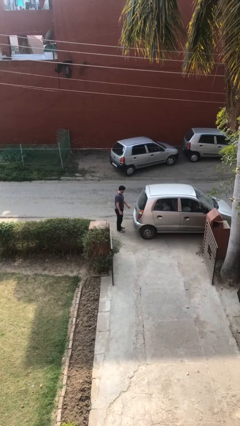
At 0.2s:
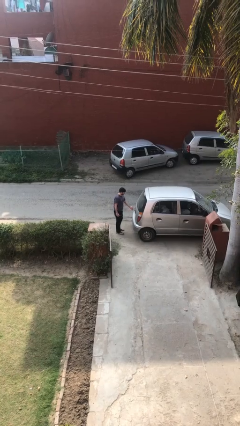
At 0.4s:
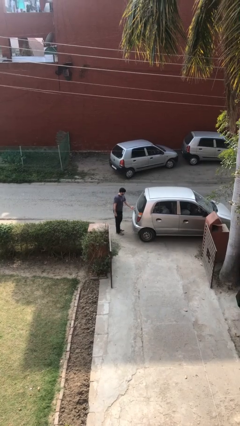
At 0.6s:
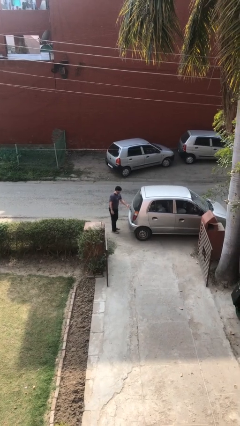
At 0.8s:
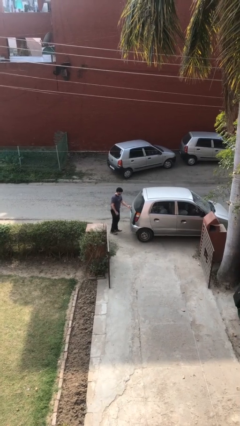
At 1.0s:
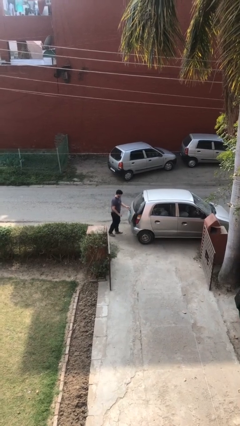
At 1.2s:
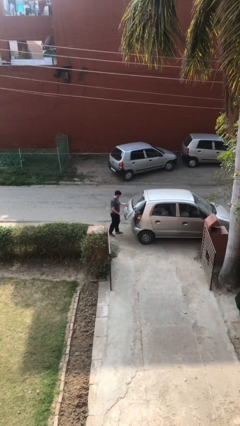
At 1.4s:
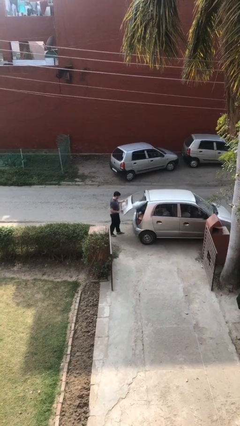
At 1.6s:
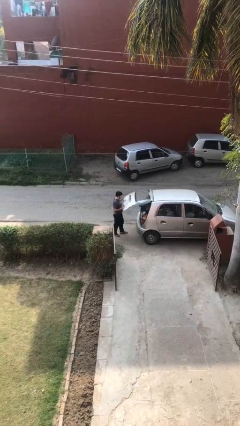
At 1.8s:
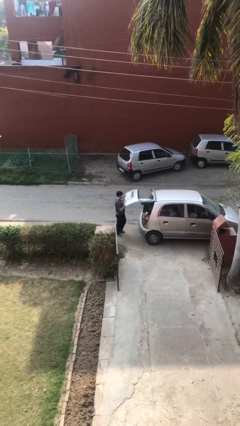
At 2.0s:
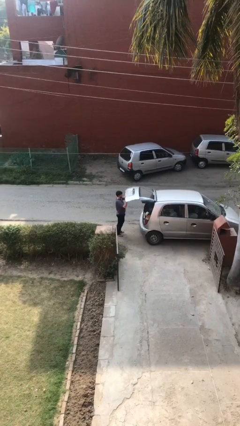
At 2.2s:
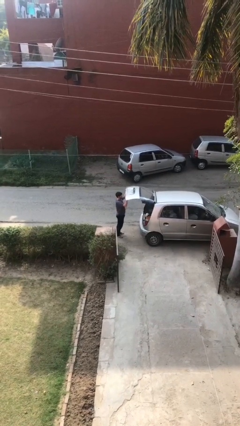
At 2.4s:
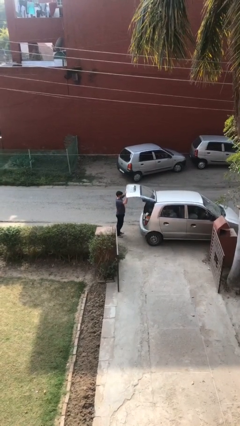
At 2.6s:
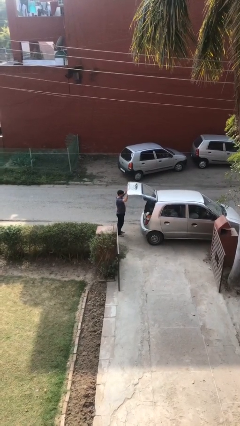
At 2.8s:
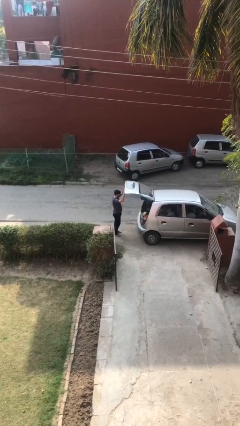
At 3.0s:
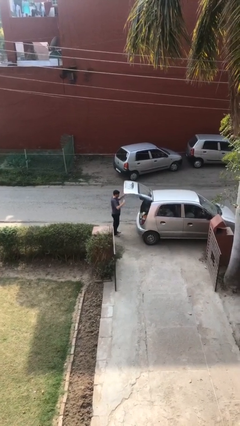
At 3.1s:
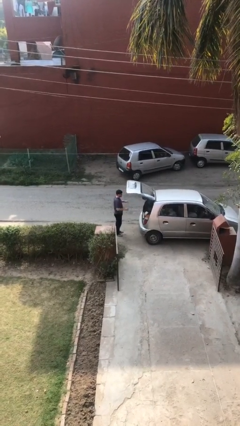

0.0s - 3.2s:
person opens car trunk

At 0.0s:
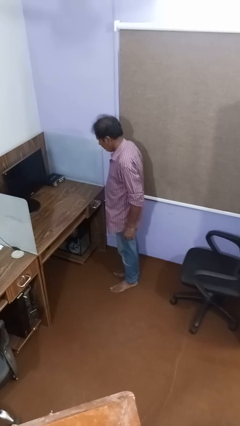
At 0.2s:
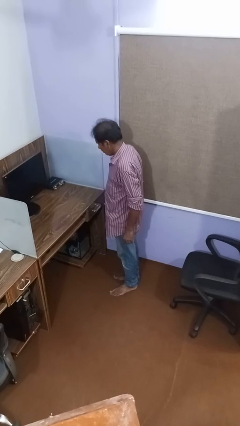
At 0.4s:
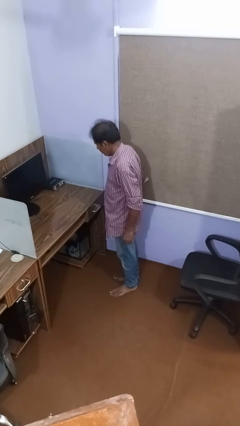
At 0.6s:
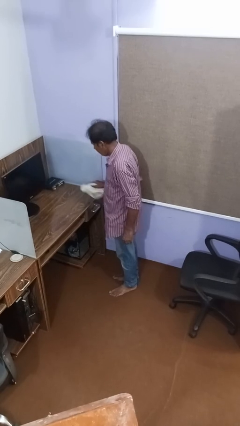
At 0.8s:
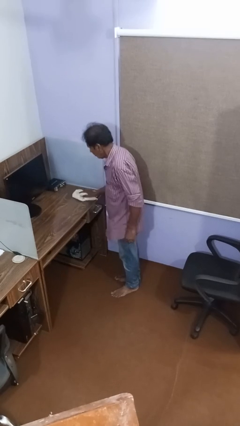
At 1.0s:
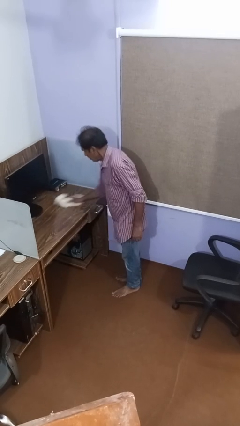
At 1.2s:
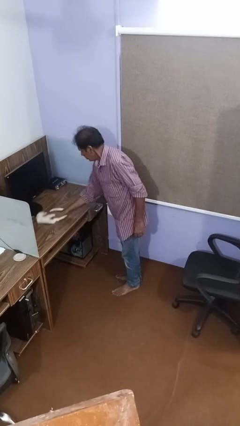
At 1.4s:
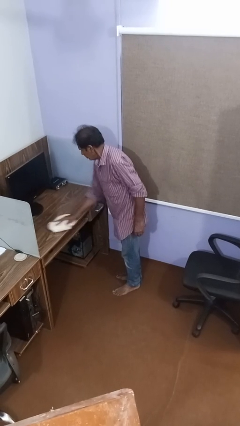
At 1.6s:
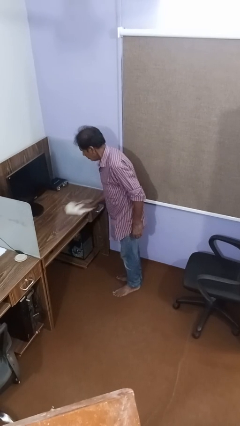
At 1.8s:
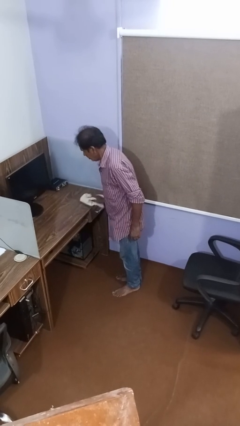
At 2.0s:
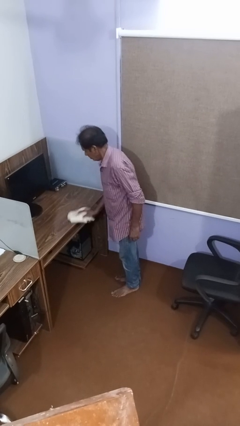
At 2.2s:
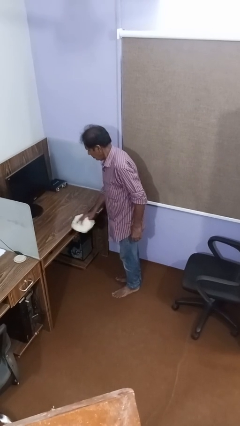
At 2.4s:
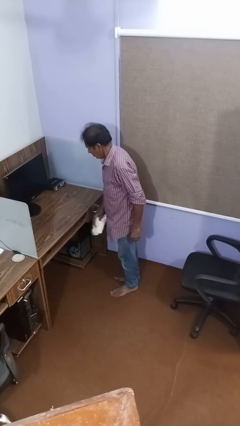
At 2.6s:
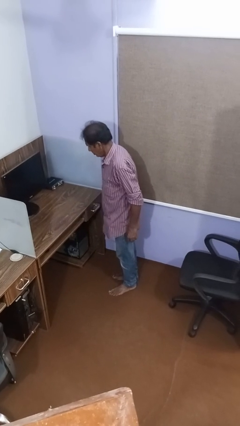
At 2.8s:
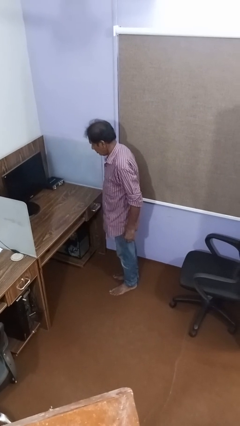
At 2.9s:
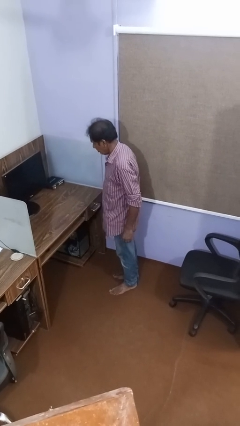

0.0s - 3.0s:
person cleans table with rag

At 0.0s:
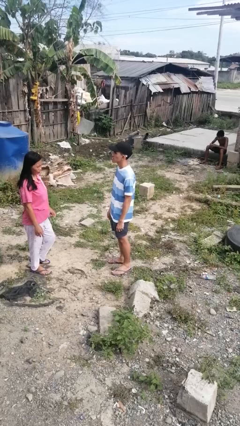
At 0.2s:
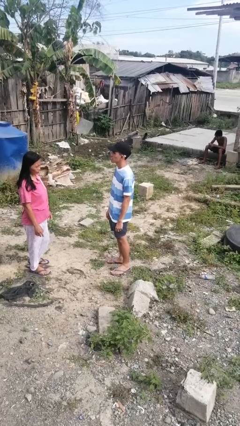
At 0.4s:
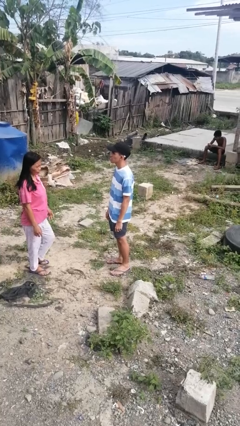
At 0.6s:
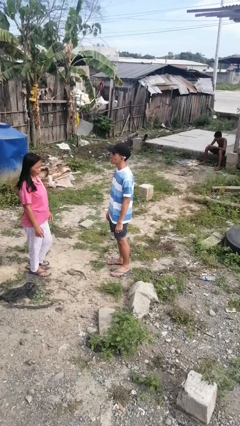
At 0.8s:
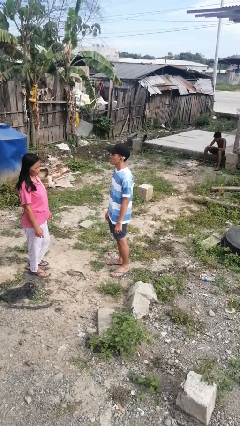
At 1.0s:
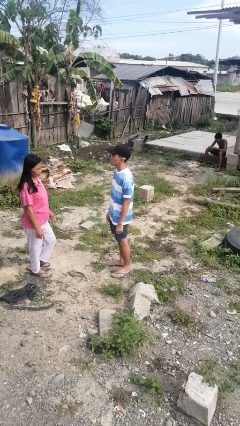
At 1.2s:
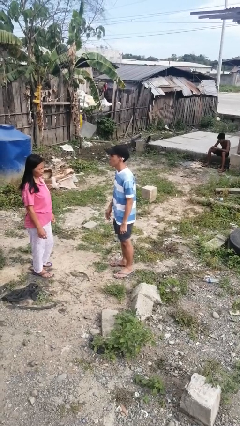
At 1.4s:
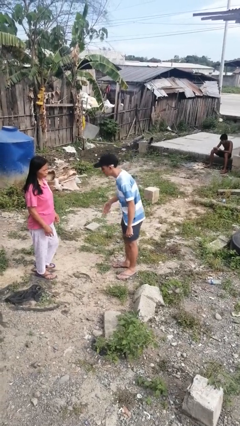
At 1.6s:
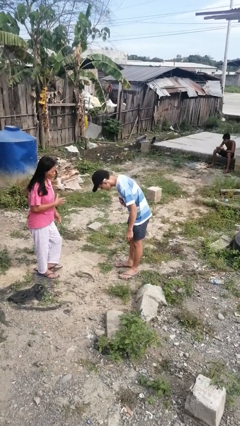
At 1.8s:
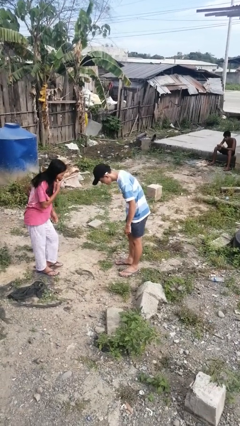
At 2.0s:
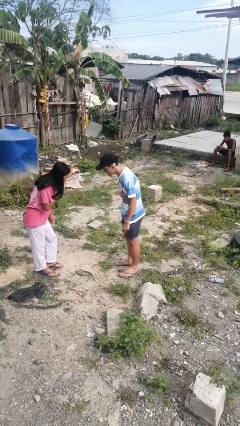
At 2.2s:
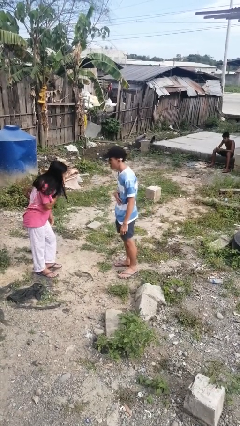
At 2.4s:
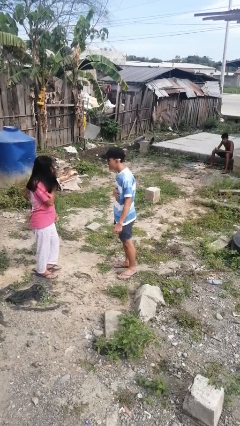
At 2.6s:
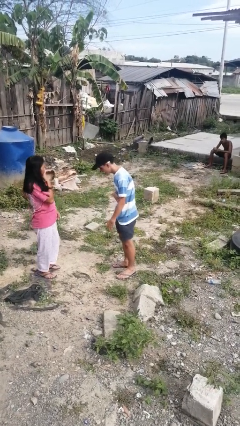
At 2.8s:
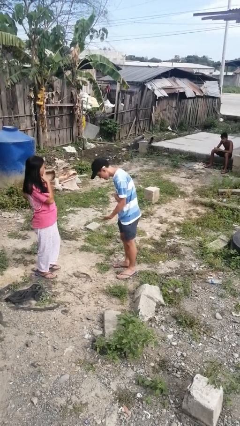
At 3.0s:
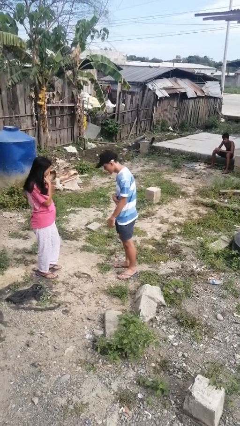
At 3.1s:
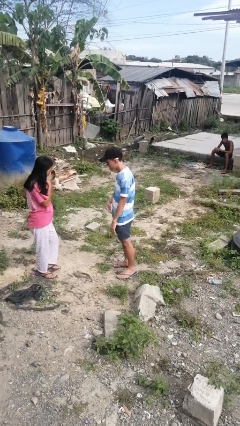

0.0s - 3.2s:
person laughs with person

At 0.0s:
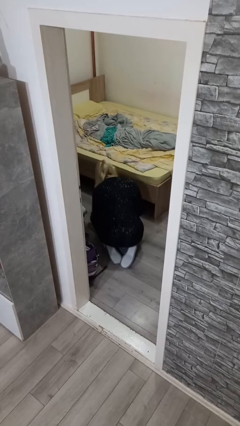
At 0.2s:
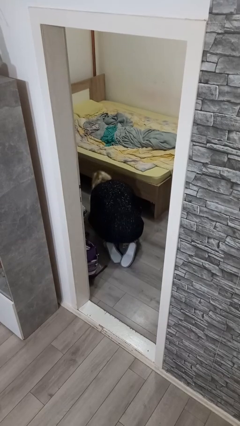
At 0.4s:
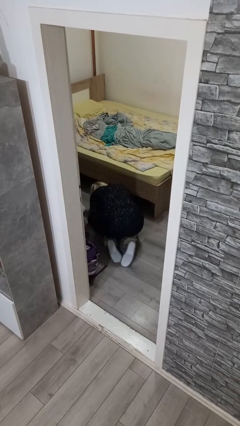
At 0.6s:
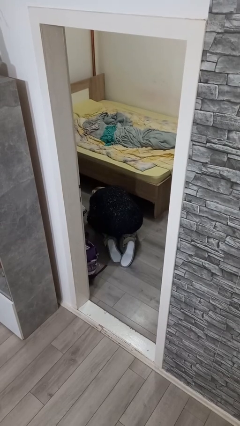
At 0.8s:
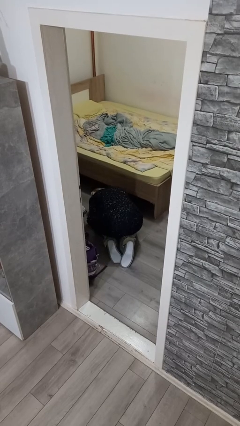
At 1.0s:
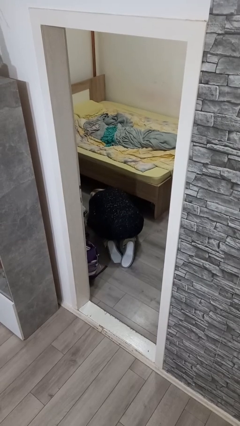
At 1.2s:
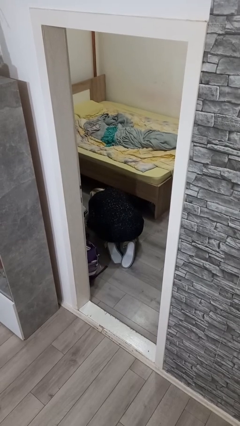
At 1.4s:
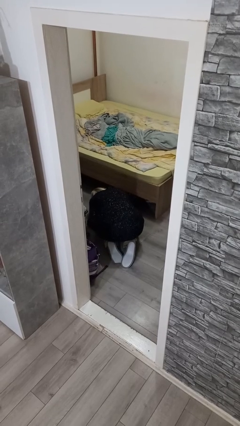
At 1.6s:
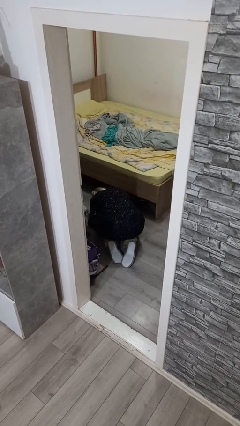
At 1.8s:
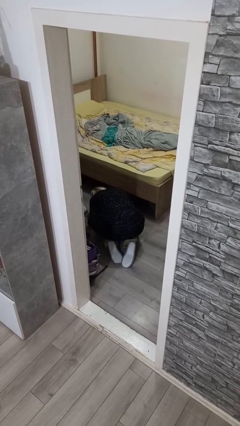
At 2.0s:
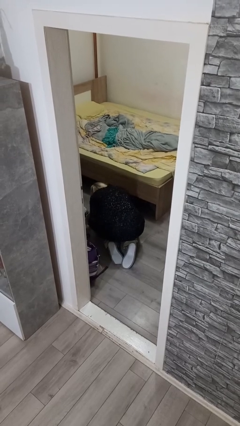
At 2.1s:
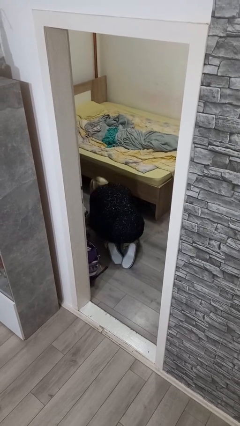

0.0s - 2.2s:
person searches under bed

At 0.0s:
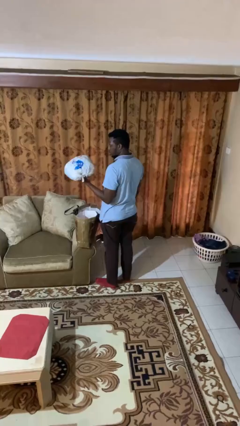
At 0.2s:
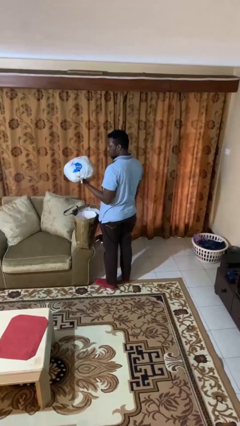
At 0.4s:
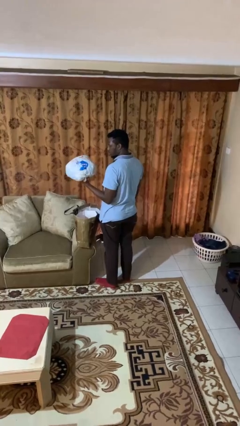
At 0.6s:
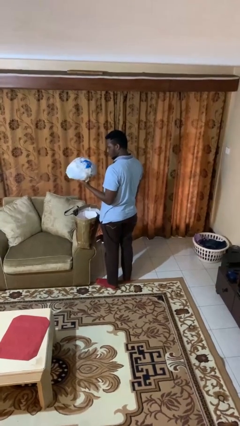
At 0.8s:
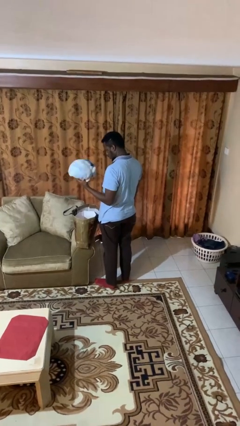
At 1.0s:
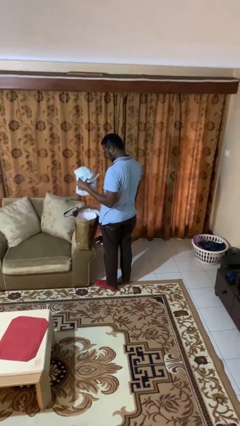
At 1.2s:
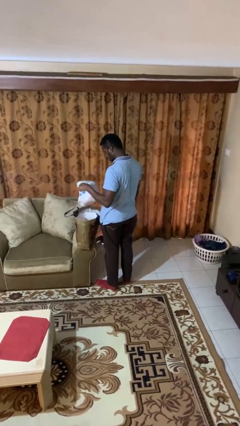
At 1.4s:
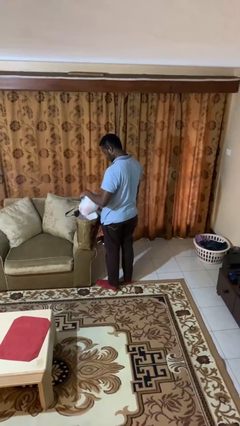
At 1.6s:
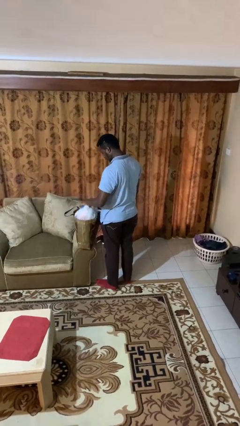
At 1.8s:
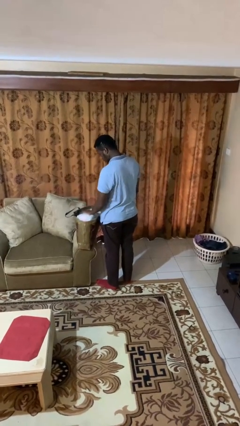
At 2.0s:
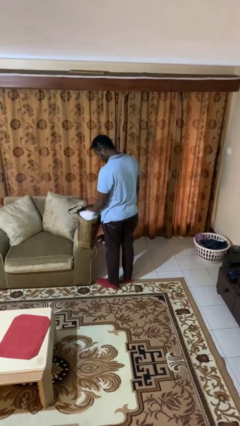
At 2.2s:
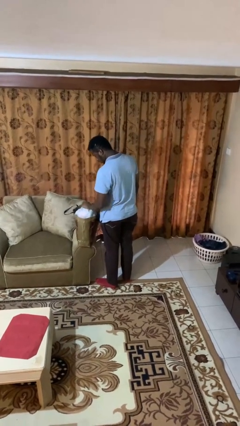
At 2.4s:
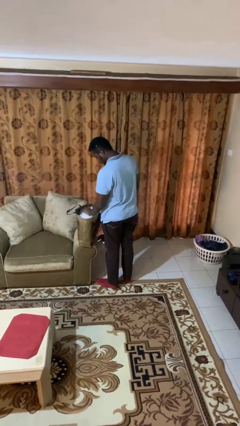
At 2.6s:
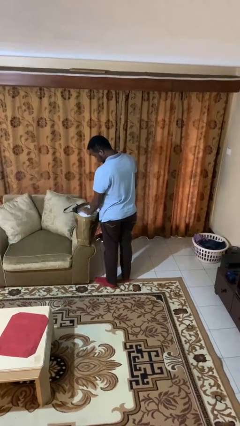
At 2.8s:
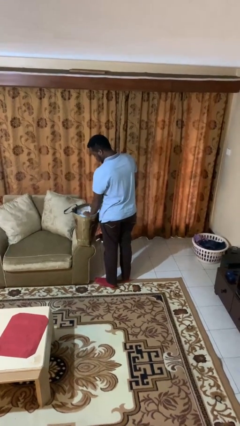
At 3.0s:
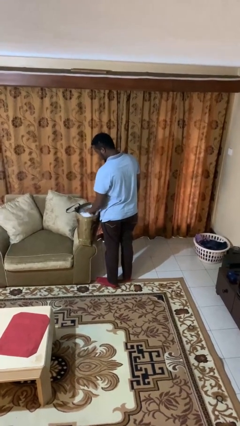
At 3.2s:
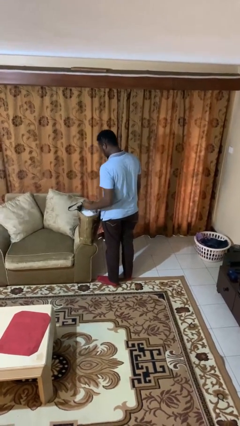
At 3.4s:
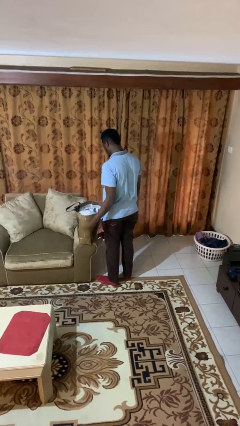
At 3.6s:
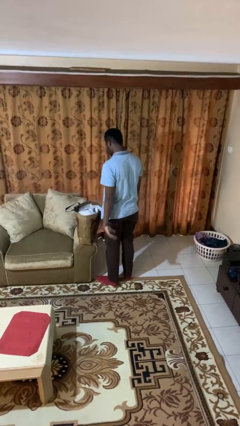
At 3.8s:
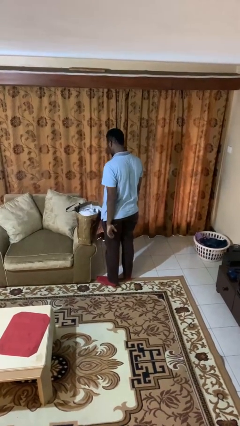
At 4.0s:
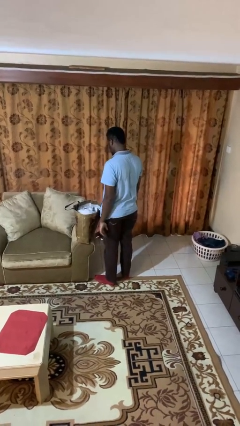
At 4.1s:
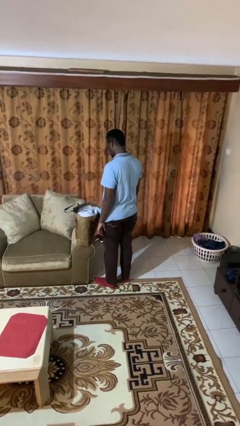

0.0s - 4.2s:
person puts object into bag

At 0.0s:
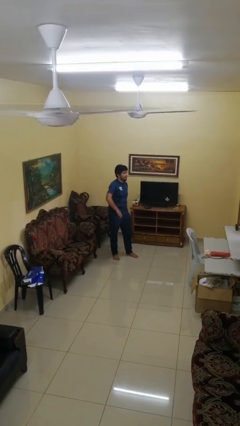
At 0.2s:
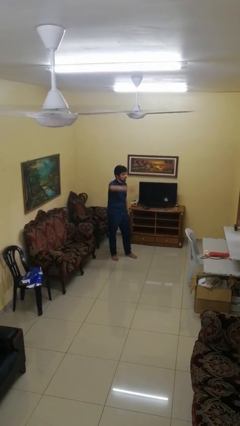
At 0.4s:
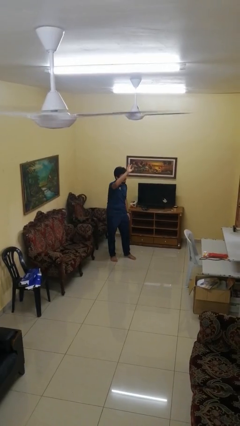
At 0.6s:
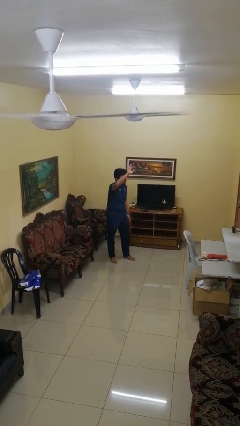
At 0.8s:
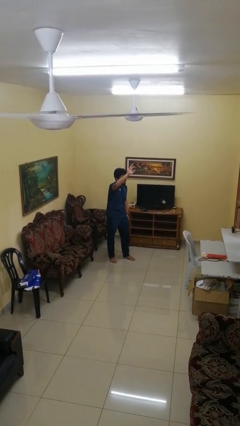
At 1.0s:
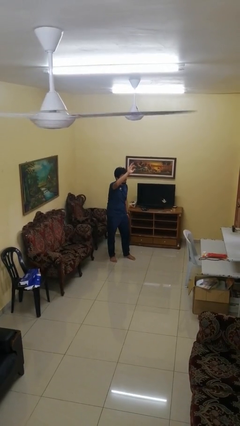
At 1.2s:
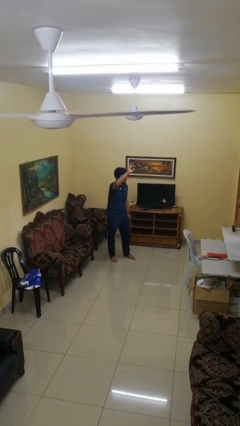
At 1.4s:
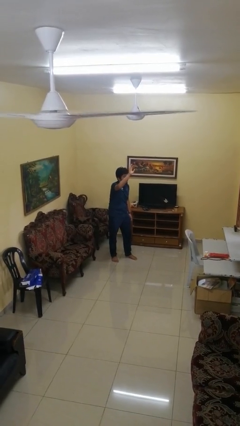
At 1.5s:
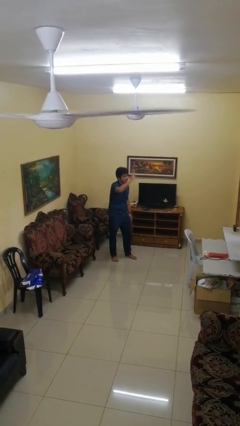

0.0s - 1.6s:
person gestures swipe up
